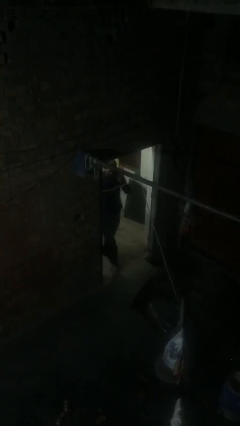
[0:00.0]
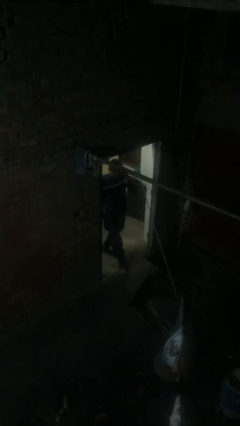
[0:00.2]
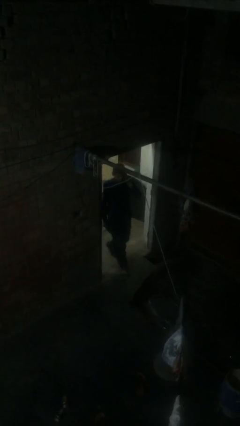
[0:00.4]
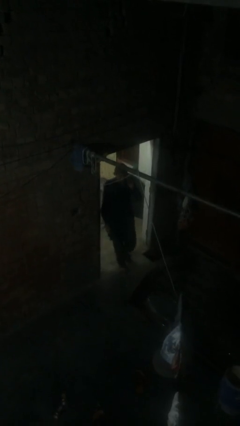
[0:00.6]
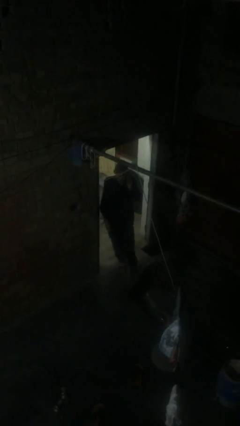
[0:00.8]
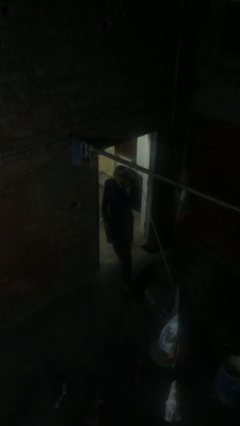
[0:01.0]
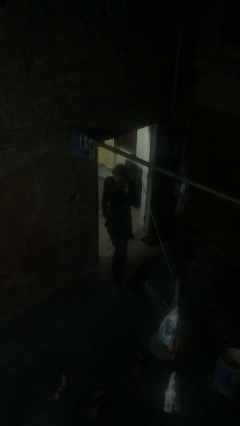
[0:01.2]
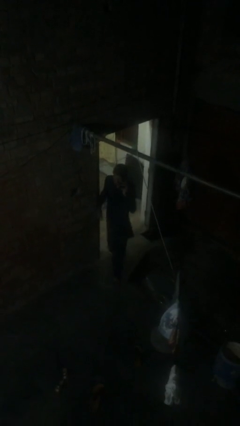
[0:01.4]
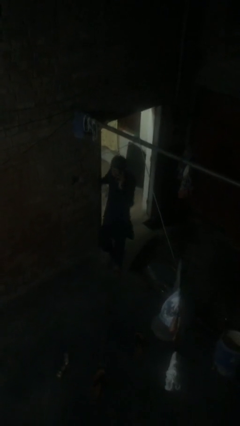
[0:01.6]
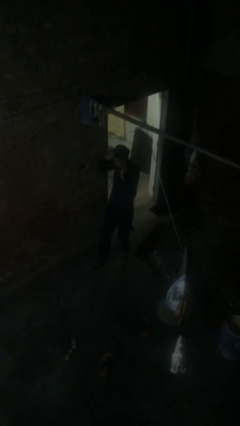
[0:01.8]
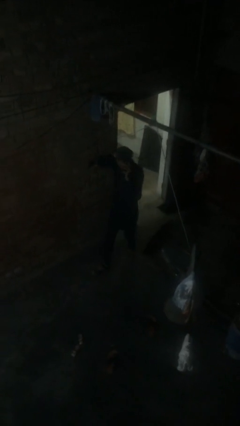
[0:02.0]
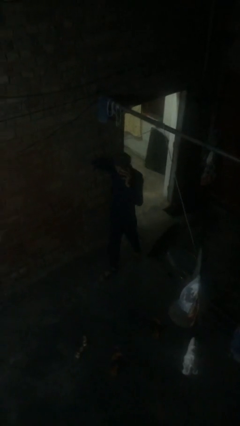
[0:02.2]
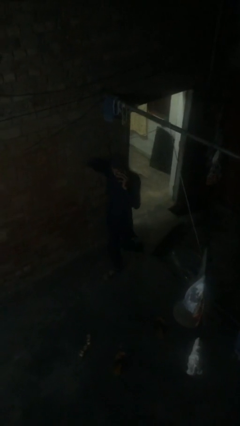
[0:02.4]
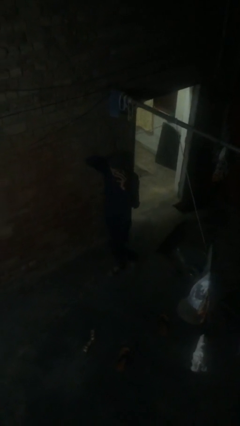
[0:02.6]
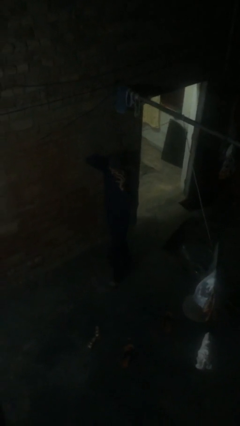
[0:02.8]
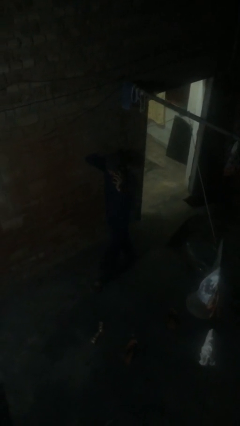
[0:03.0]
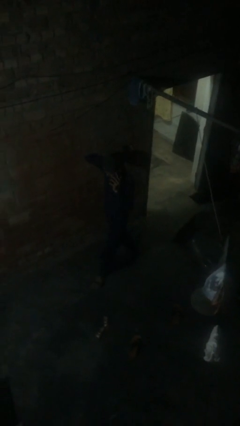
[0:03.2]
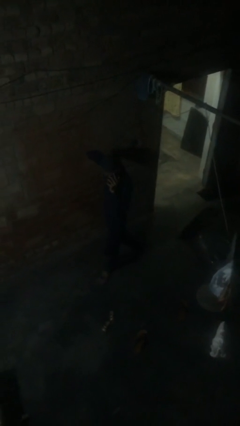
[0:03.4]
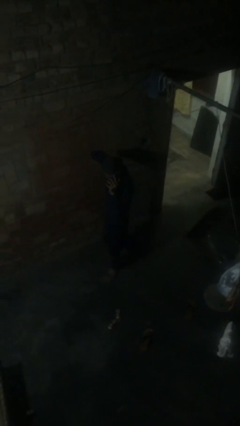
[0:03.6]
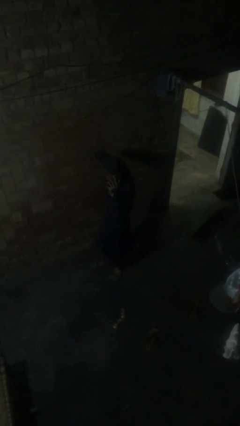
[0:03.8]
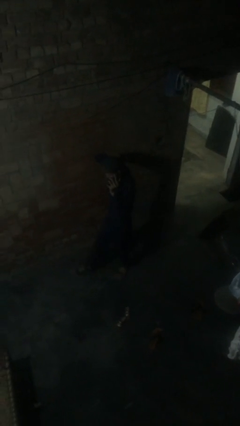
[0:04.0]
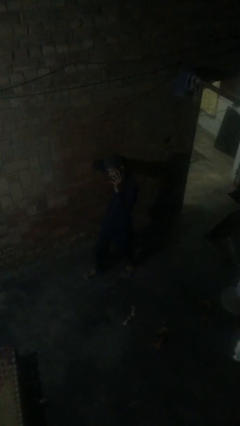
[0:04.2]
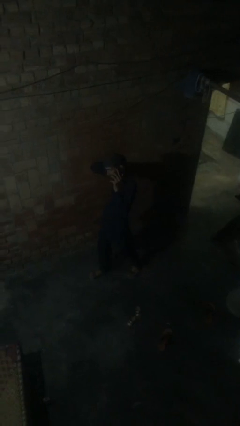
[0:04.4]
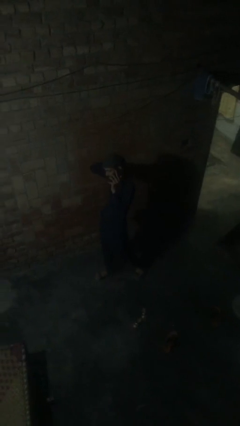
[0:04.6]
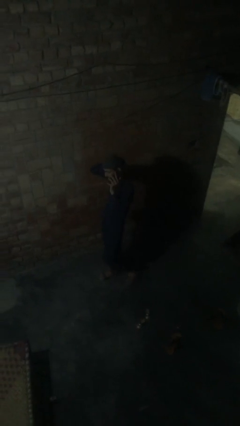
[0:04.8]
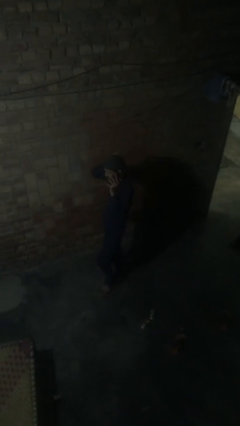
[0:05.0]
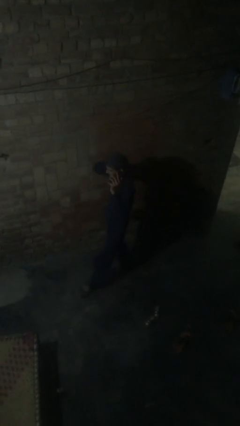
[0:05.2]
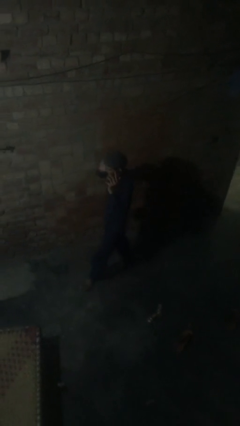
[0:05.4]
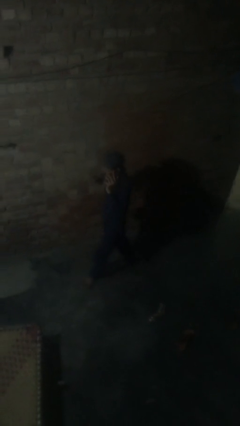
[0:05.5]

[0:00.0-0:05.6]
person enters scene through structure

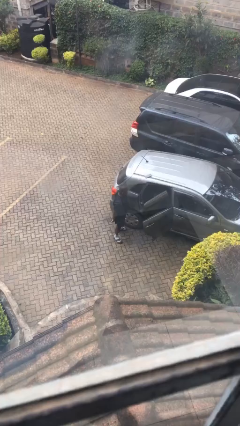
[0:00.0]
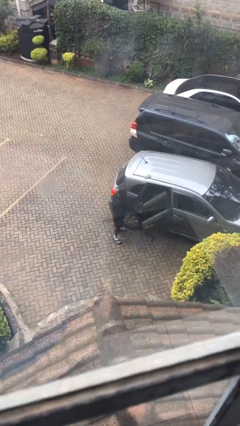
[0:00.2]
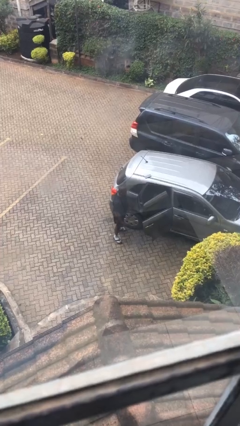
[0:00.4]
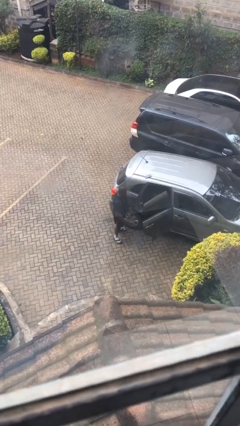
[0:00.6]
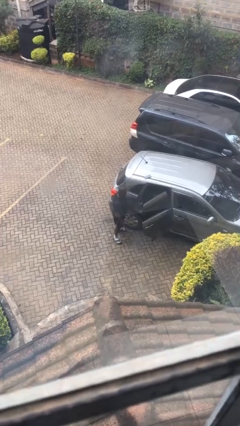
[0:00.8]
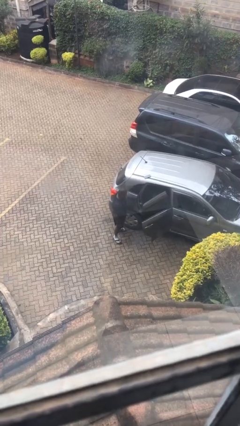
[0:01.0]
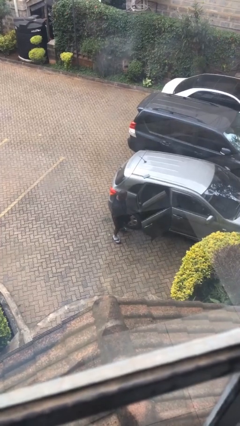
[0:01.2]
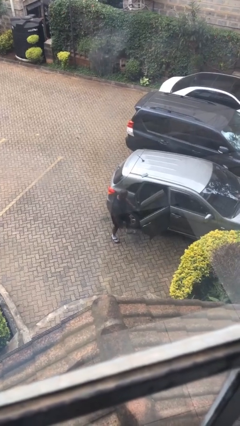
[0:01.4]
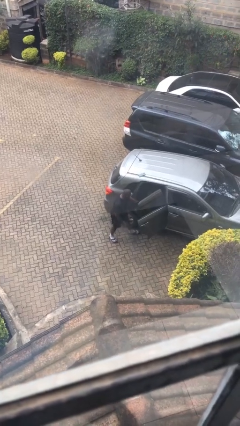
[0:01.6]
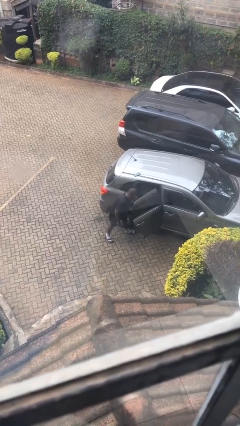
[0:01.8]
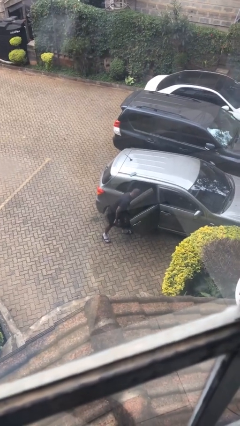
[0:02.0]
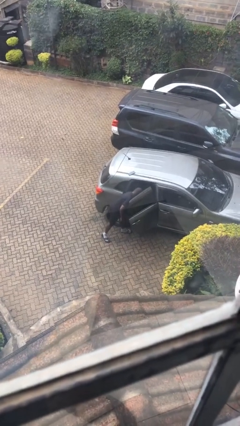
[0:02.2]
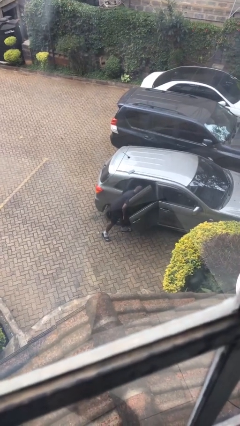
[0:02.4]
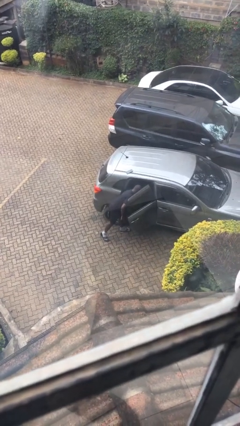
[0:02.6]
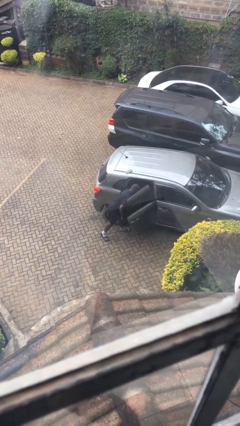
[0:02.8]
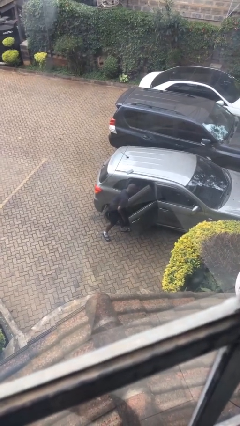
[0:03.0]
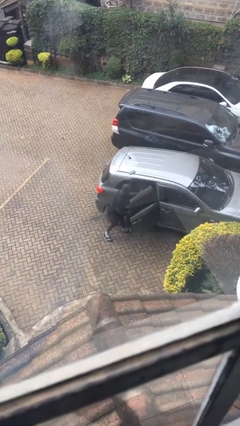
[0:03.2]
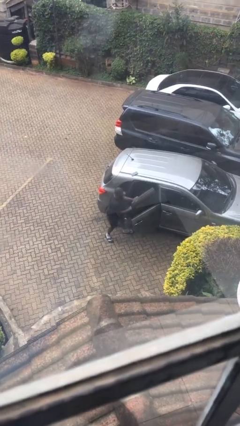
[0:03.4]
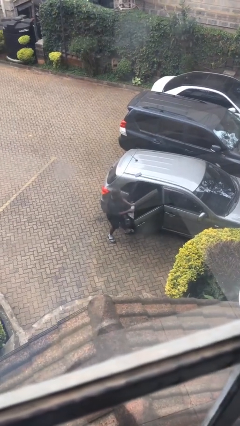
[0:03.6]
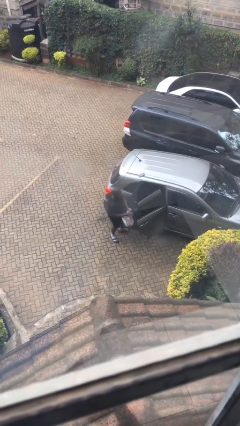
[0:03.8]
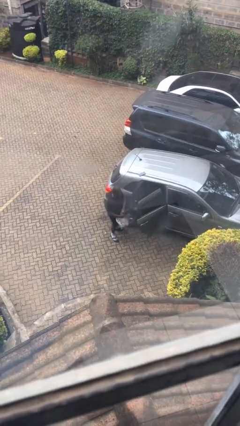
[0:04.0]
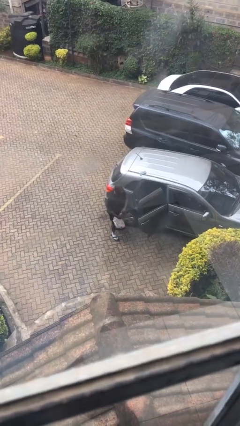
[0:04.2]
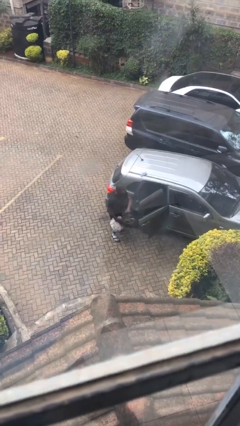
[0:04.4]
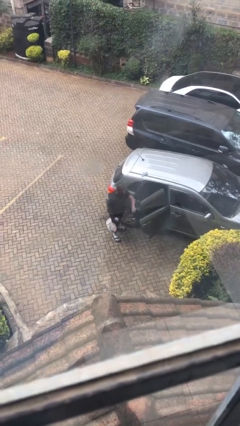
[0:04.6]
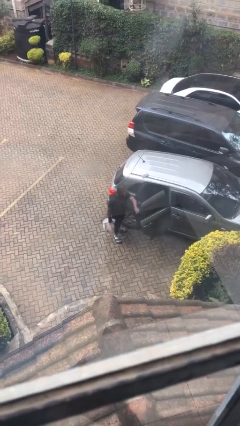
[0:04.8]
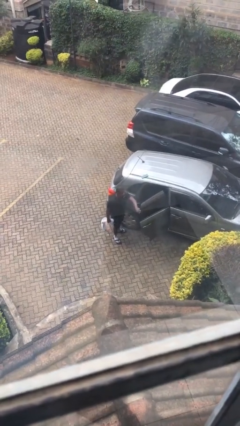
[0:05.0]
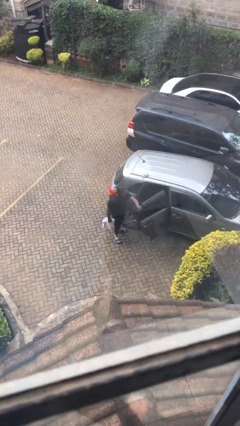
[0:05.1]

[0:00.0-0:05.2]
person unloads car

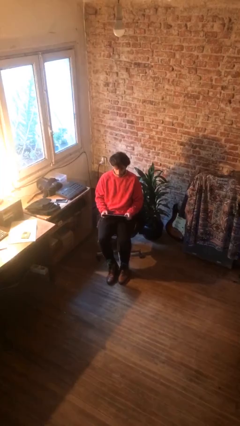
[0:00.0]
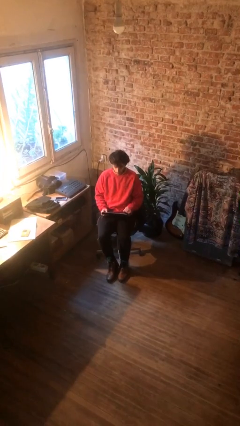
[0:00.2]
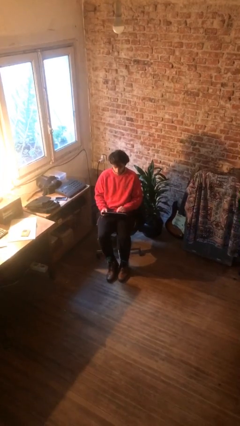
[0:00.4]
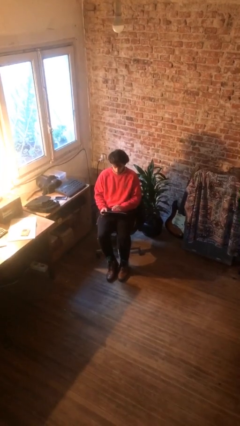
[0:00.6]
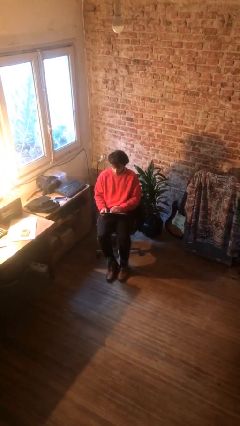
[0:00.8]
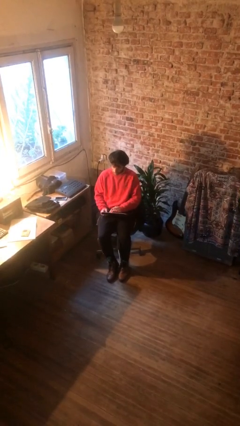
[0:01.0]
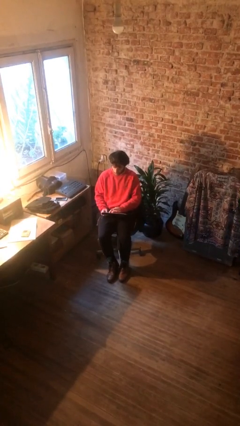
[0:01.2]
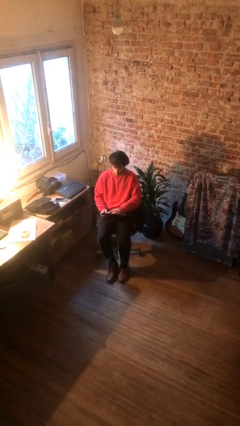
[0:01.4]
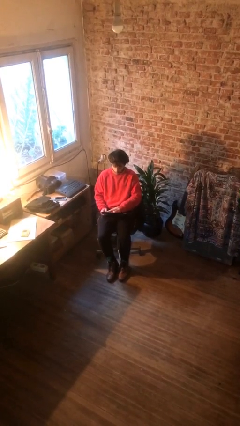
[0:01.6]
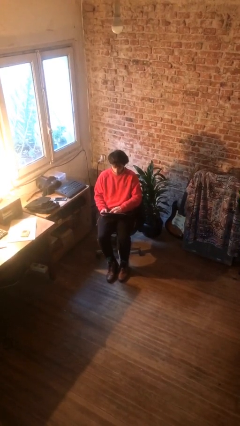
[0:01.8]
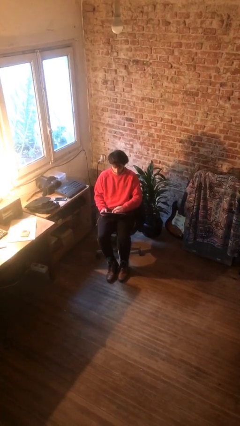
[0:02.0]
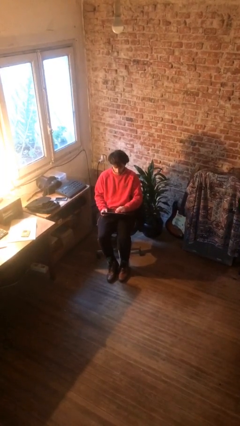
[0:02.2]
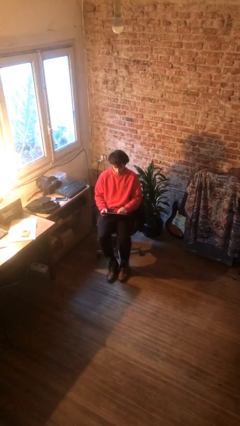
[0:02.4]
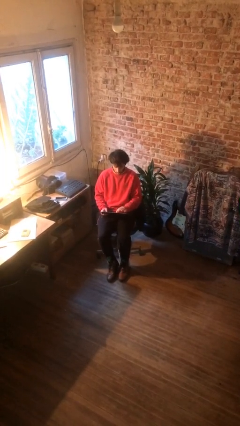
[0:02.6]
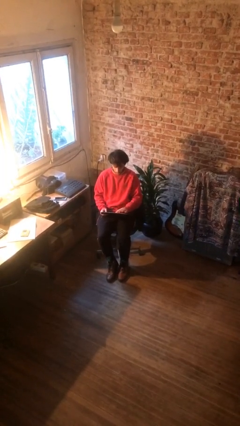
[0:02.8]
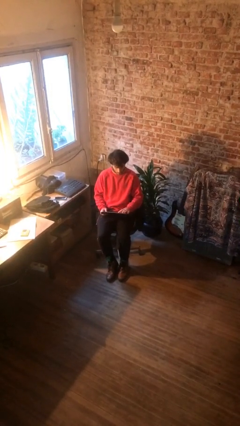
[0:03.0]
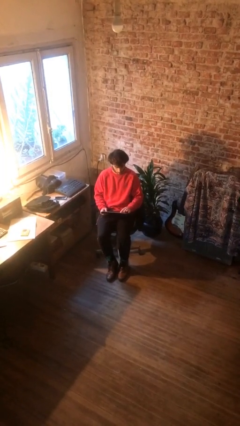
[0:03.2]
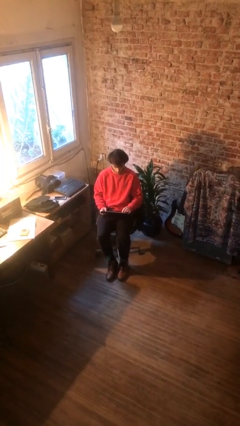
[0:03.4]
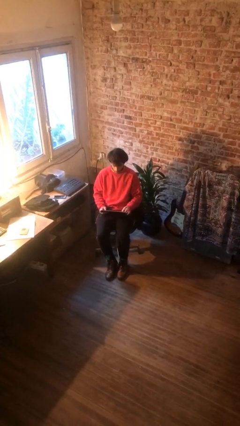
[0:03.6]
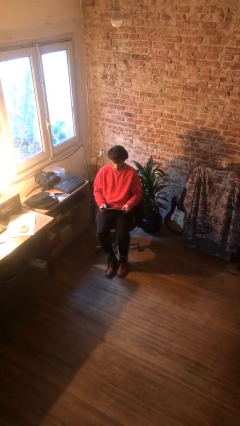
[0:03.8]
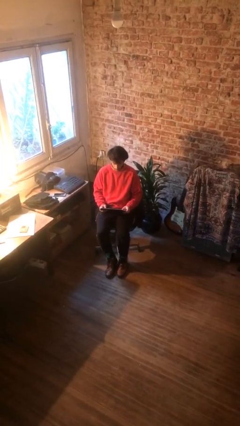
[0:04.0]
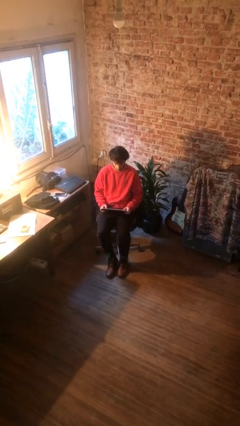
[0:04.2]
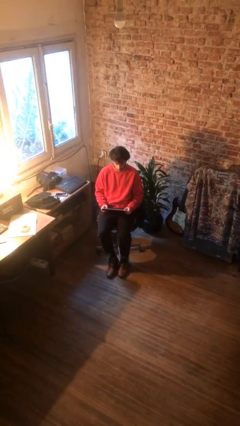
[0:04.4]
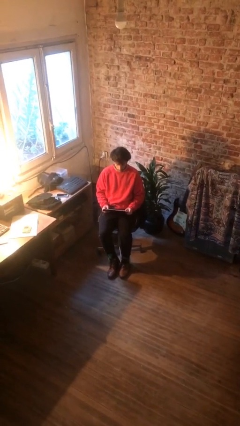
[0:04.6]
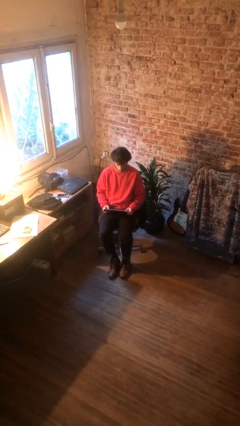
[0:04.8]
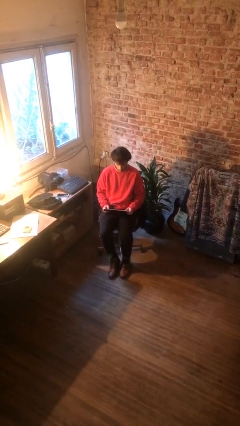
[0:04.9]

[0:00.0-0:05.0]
person interacts with tablet

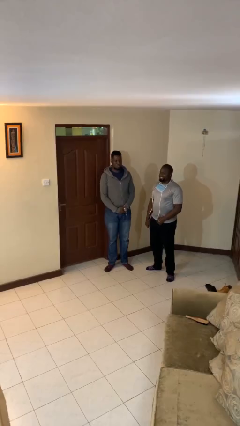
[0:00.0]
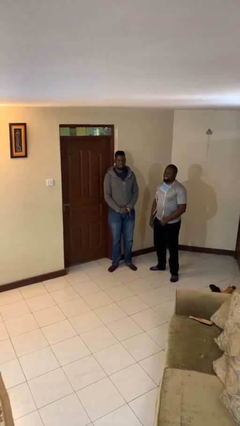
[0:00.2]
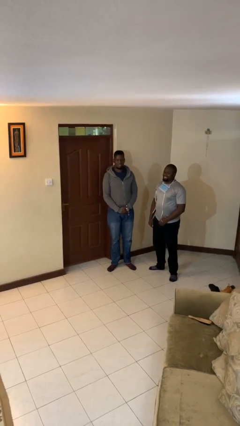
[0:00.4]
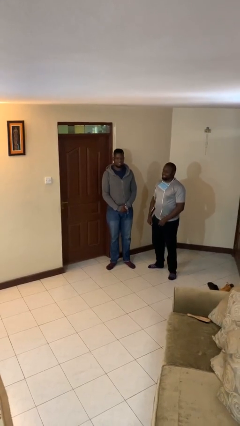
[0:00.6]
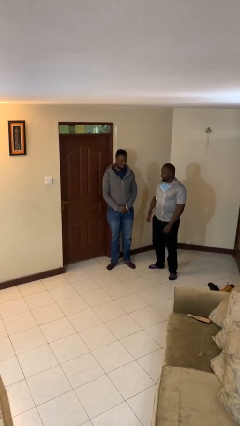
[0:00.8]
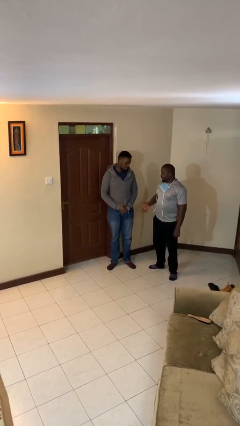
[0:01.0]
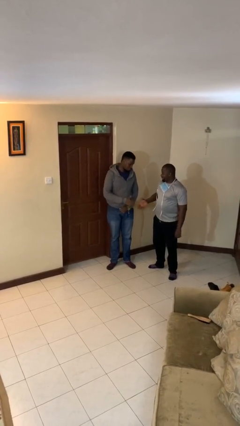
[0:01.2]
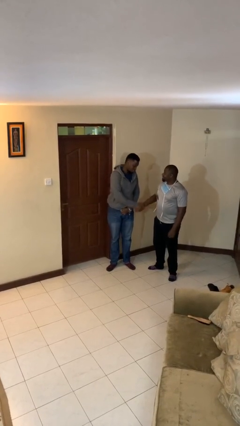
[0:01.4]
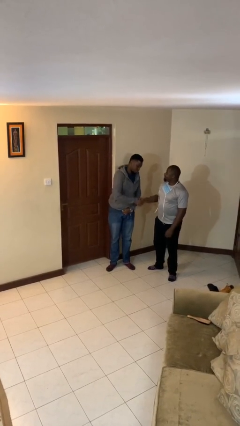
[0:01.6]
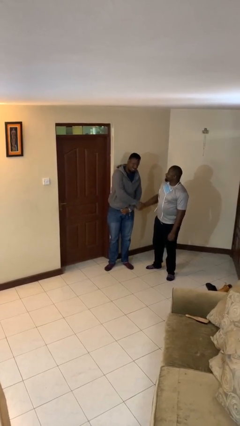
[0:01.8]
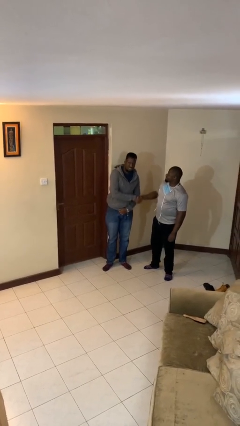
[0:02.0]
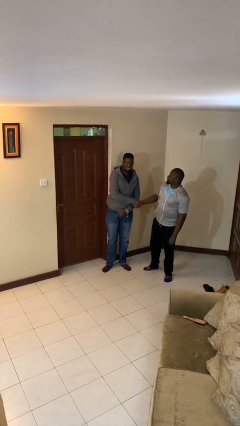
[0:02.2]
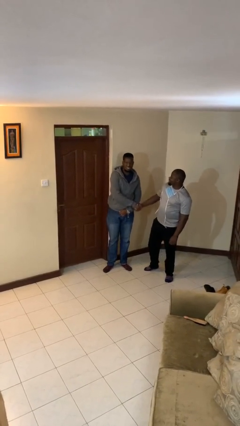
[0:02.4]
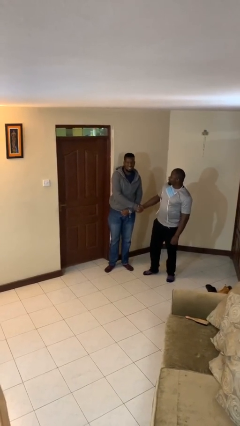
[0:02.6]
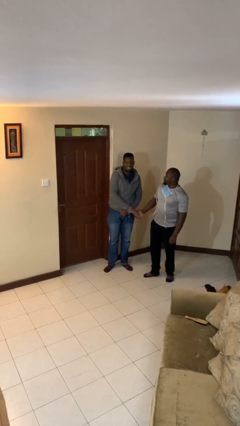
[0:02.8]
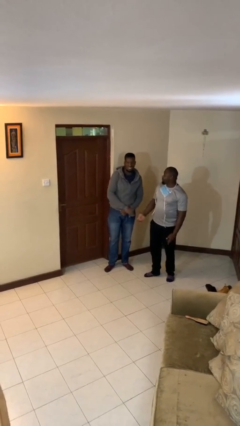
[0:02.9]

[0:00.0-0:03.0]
person shakes hand
